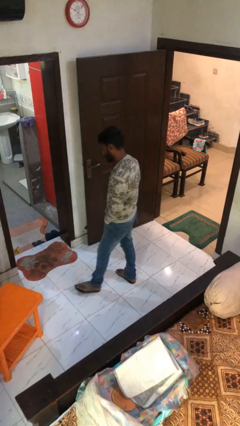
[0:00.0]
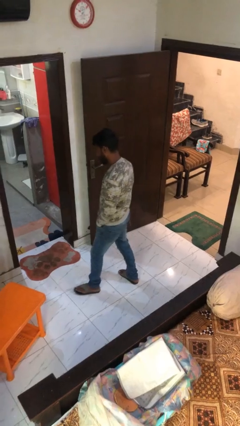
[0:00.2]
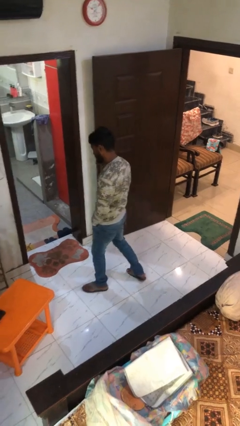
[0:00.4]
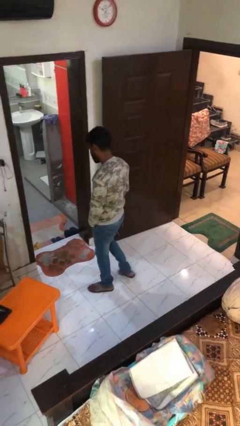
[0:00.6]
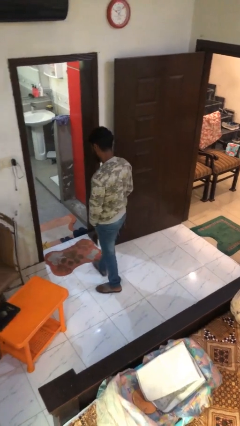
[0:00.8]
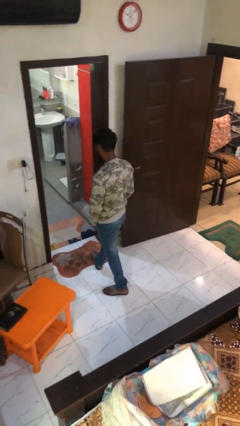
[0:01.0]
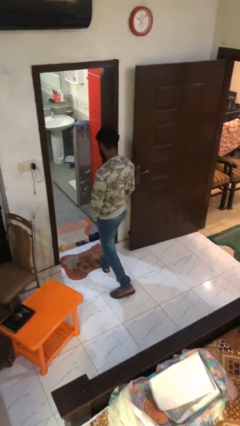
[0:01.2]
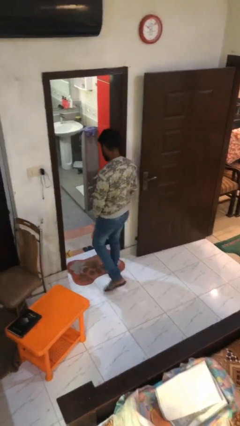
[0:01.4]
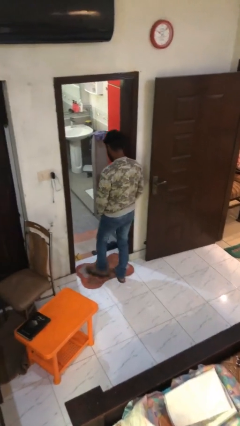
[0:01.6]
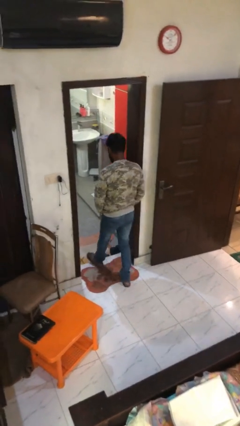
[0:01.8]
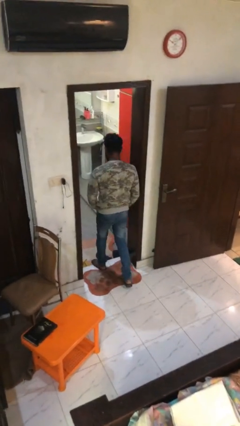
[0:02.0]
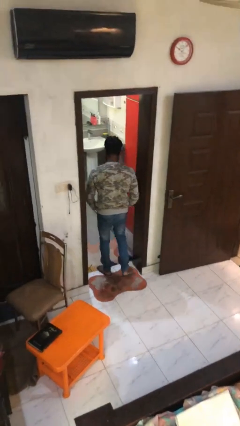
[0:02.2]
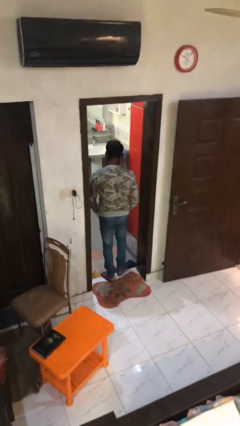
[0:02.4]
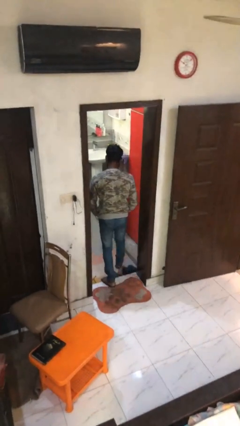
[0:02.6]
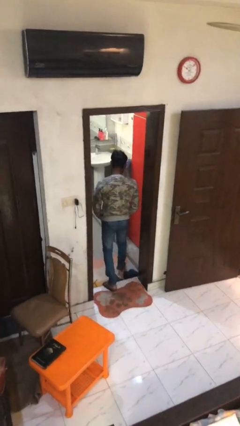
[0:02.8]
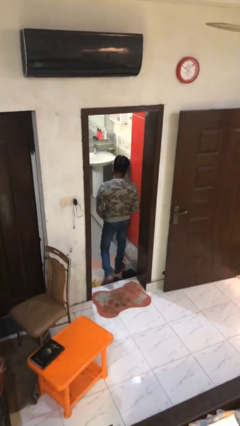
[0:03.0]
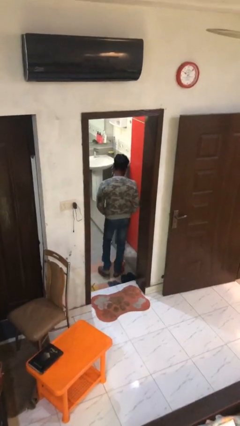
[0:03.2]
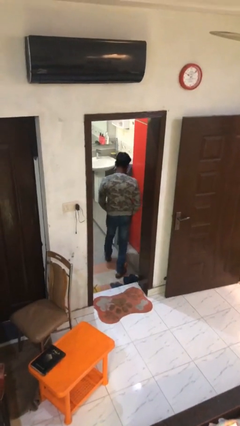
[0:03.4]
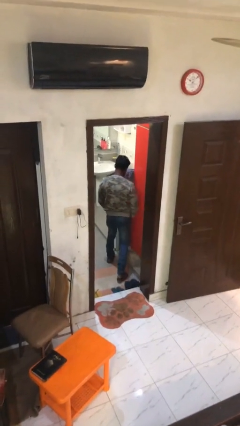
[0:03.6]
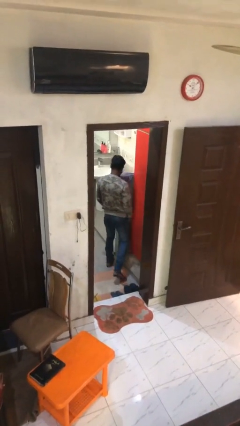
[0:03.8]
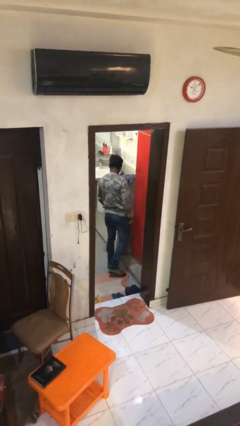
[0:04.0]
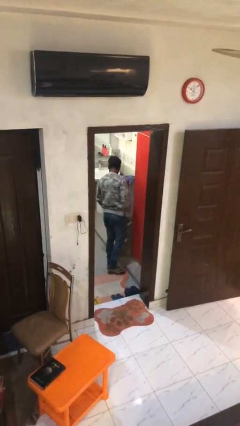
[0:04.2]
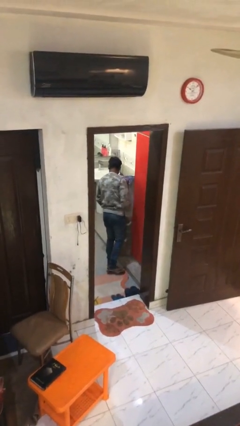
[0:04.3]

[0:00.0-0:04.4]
person exits scene through structure

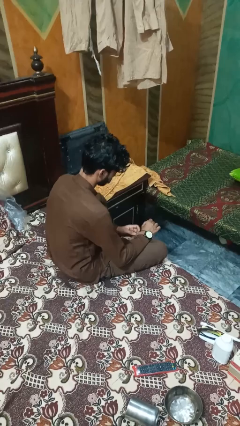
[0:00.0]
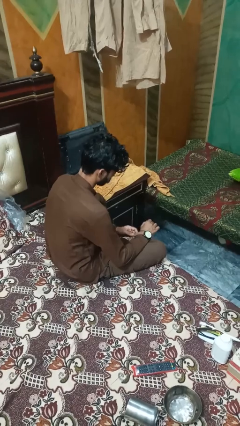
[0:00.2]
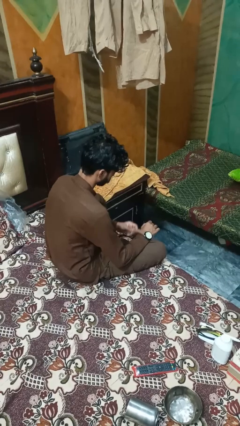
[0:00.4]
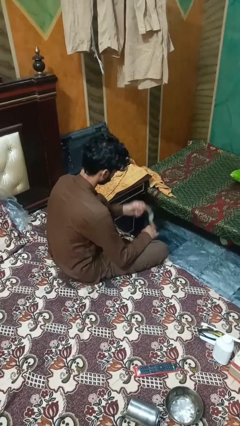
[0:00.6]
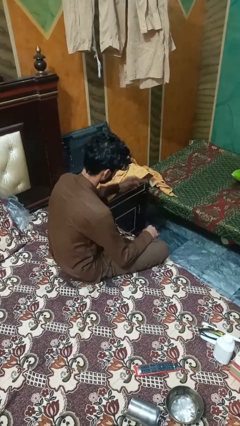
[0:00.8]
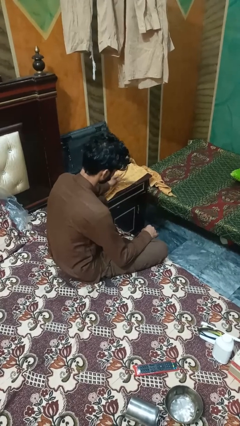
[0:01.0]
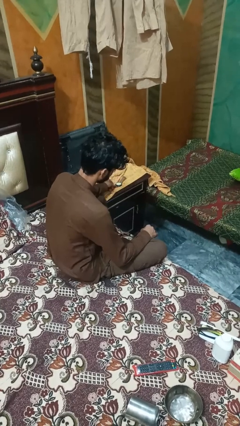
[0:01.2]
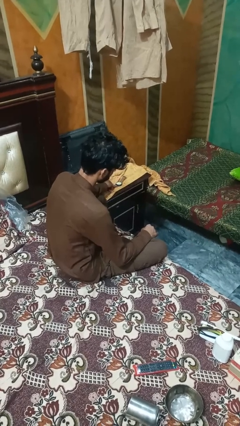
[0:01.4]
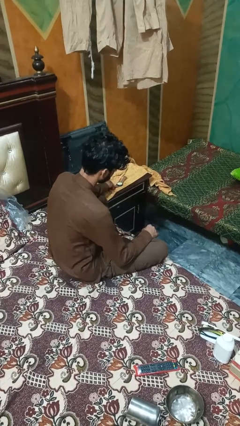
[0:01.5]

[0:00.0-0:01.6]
person takes off wristwatch

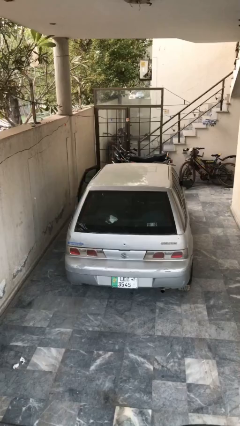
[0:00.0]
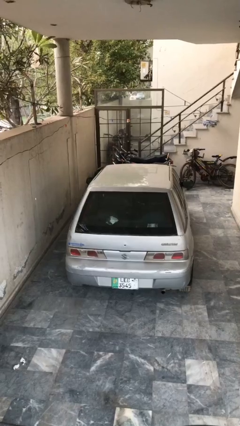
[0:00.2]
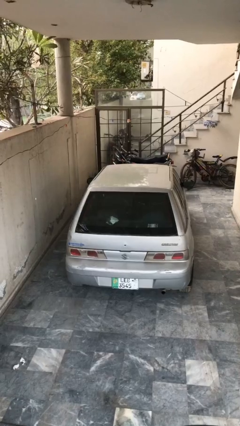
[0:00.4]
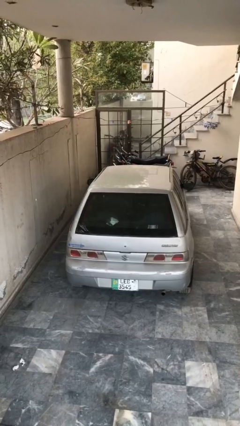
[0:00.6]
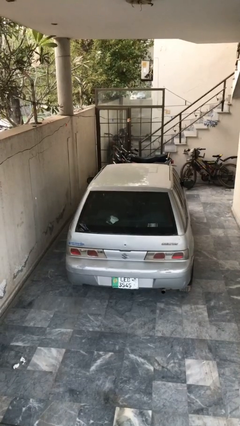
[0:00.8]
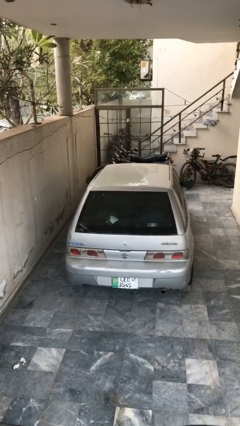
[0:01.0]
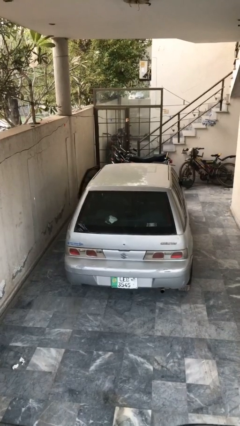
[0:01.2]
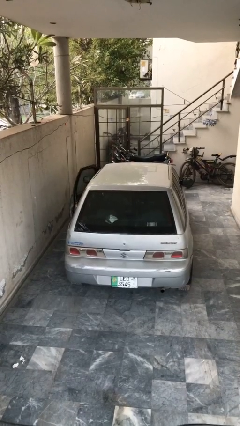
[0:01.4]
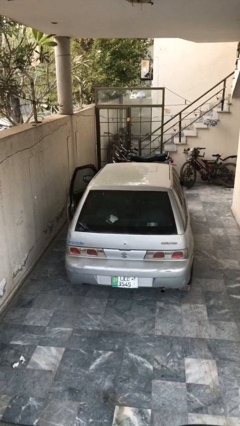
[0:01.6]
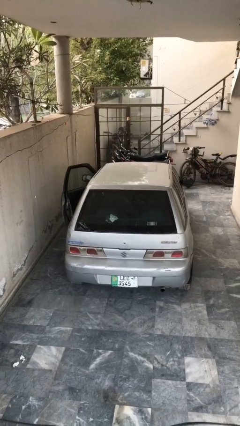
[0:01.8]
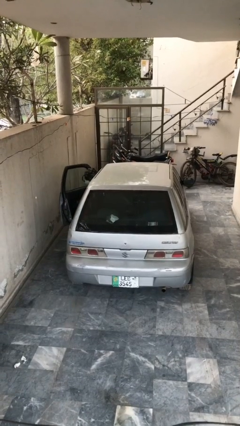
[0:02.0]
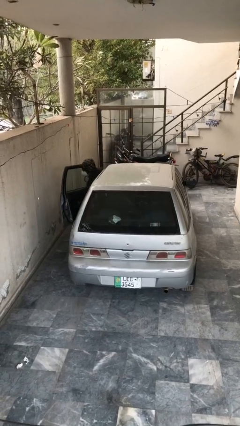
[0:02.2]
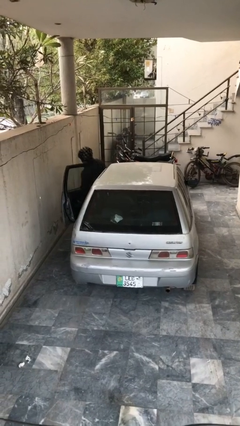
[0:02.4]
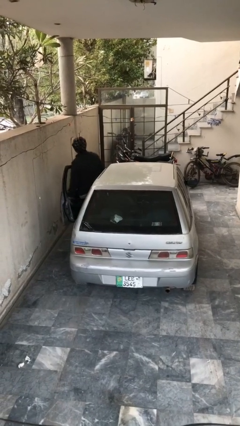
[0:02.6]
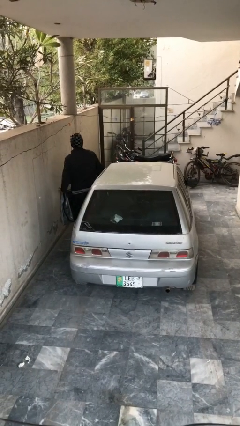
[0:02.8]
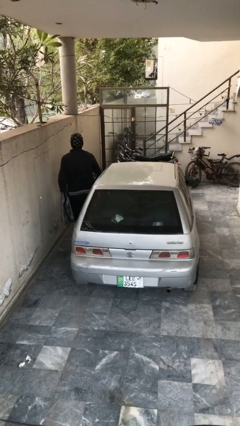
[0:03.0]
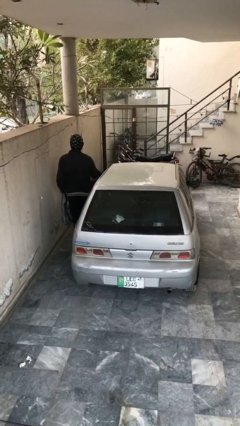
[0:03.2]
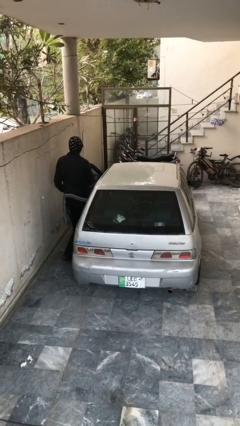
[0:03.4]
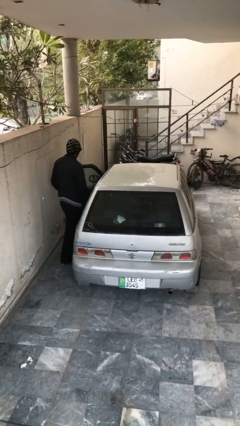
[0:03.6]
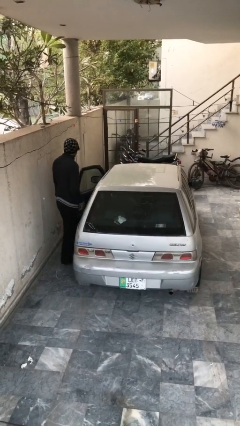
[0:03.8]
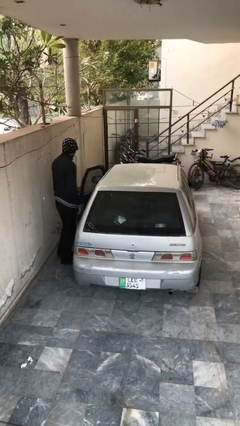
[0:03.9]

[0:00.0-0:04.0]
car drops off person

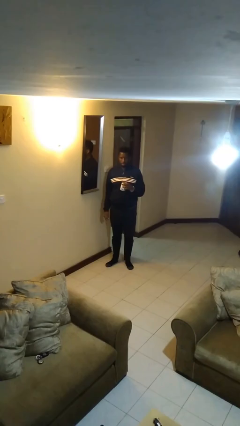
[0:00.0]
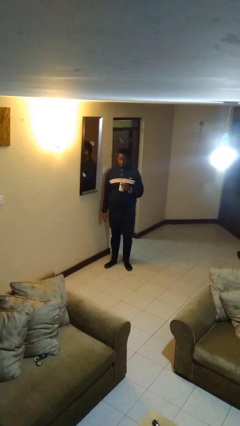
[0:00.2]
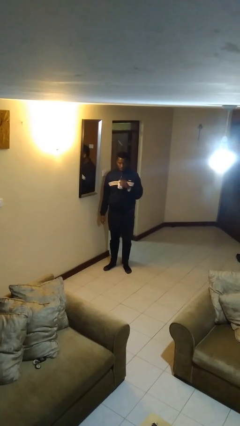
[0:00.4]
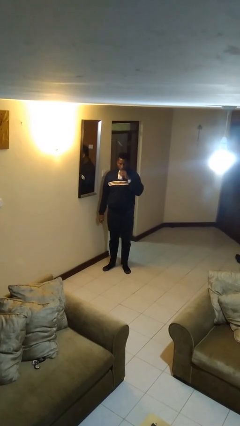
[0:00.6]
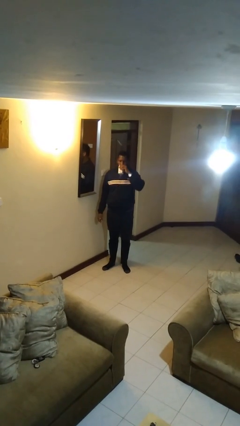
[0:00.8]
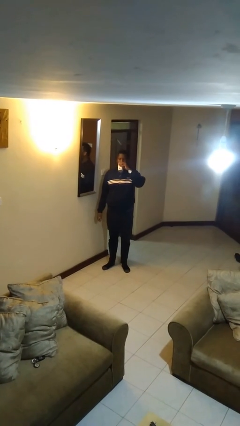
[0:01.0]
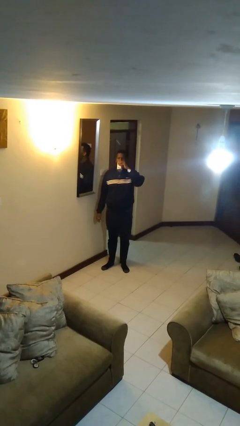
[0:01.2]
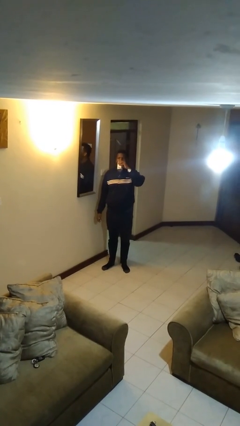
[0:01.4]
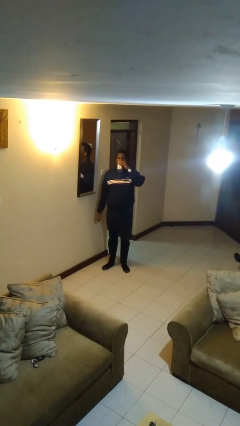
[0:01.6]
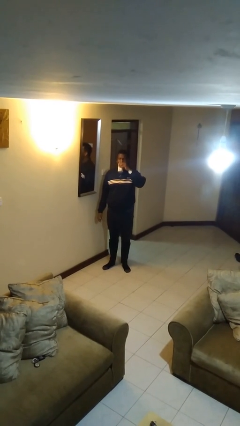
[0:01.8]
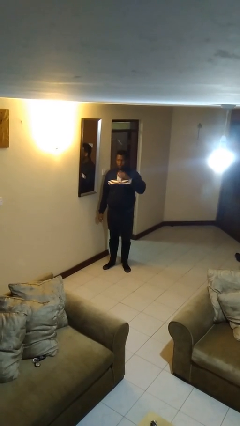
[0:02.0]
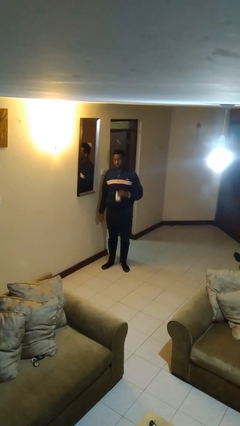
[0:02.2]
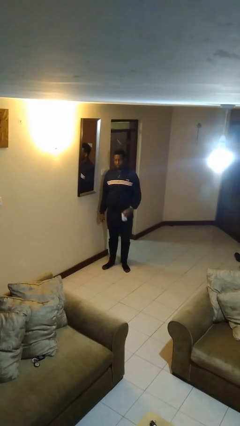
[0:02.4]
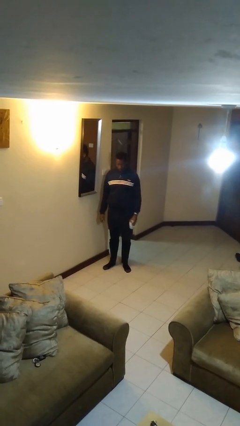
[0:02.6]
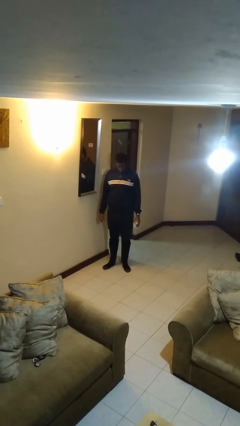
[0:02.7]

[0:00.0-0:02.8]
person drinks from beverage can

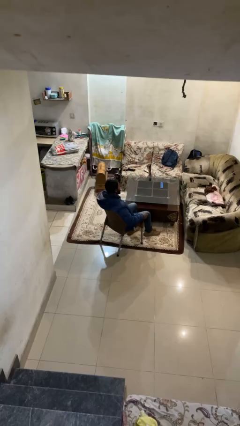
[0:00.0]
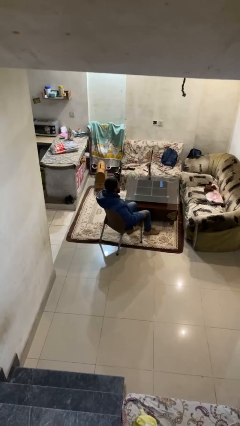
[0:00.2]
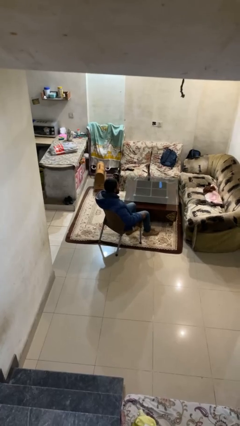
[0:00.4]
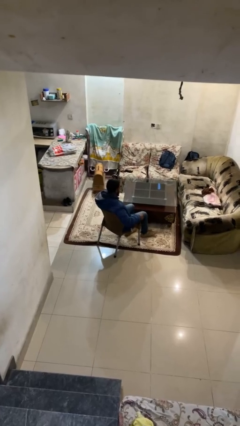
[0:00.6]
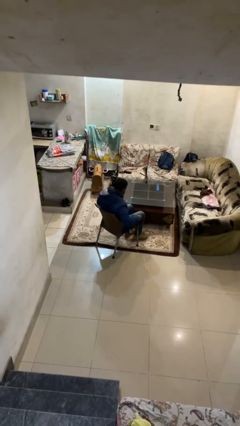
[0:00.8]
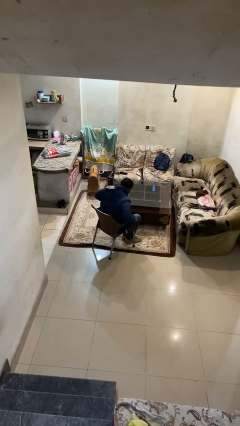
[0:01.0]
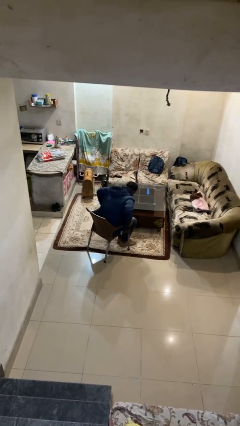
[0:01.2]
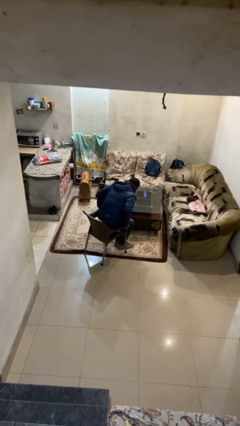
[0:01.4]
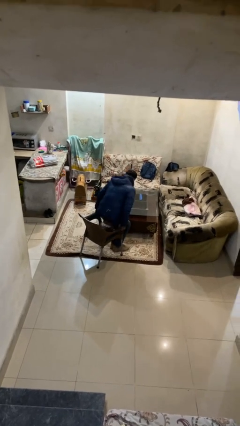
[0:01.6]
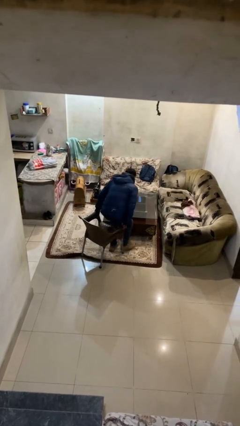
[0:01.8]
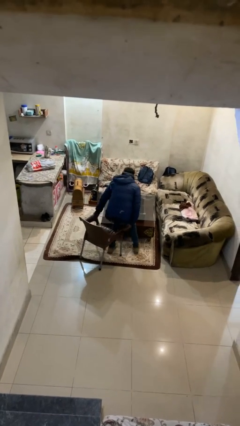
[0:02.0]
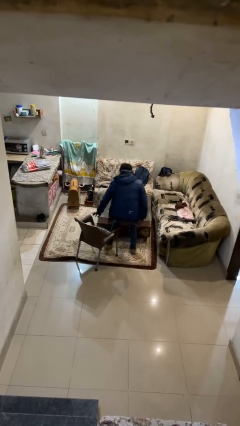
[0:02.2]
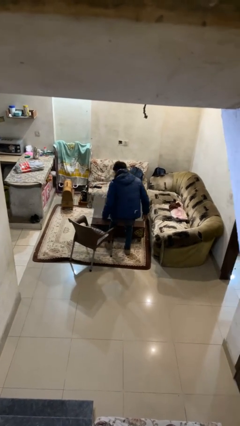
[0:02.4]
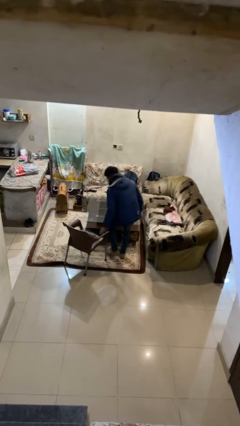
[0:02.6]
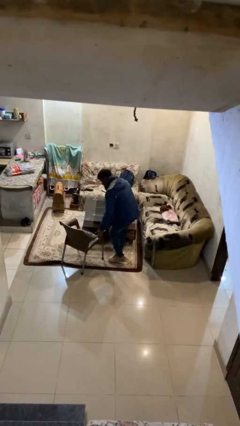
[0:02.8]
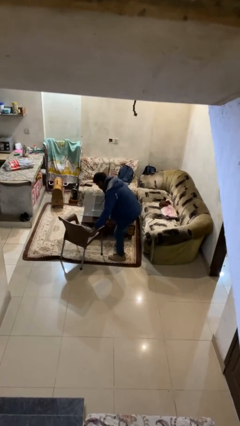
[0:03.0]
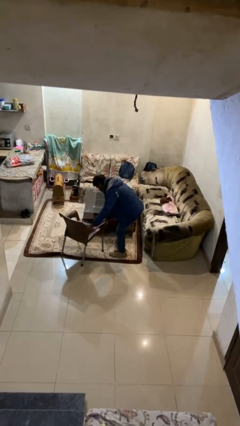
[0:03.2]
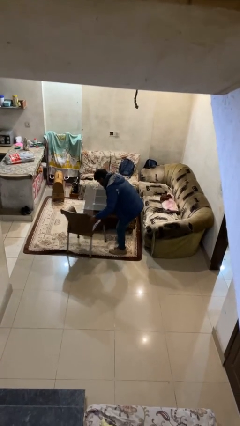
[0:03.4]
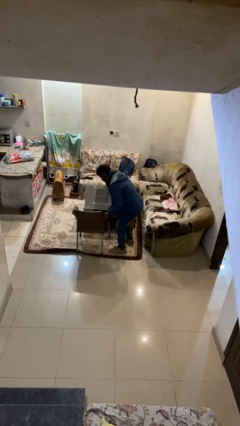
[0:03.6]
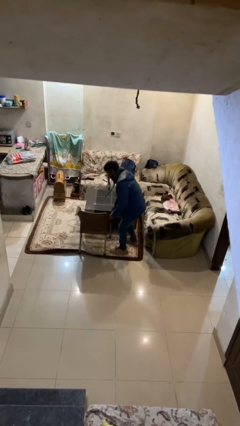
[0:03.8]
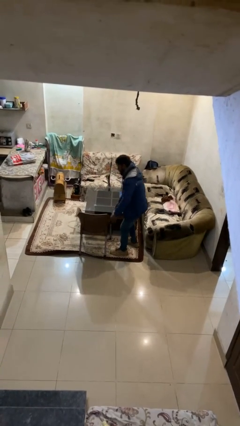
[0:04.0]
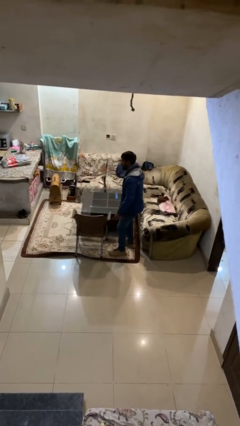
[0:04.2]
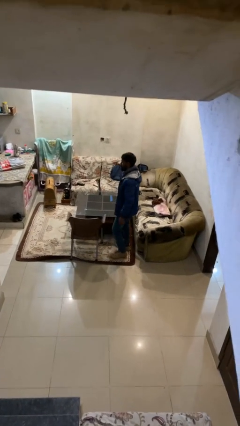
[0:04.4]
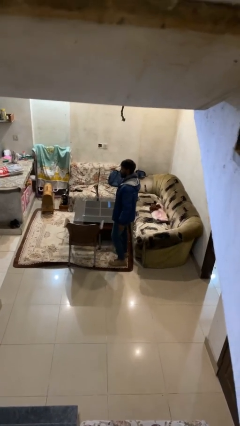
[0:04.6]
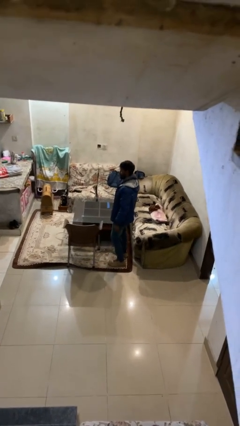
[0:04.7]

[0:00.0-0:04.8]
person stands up
